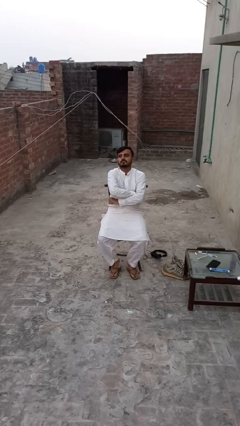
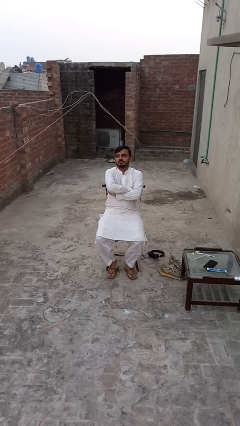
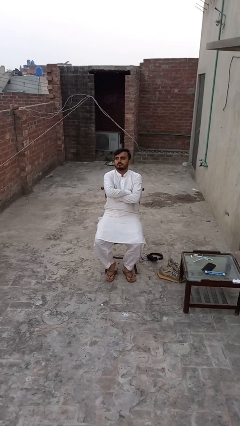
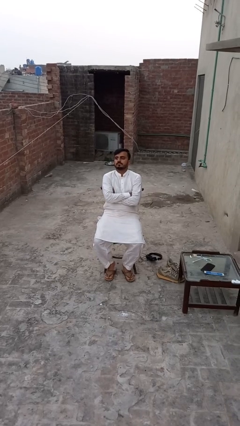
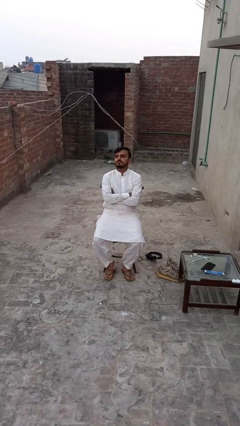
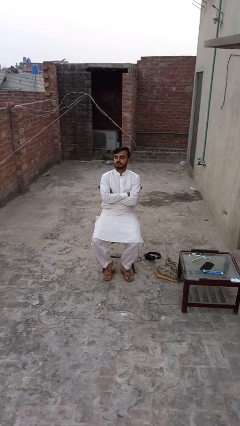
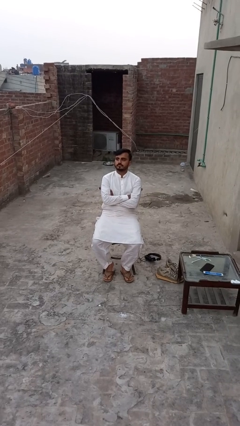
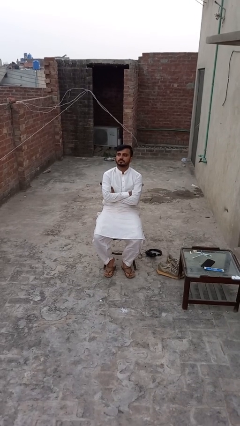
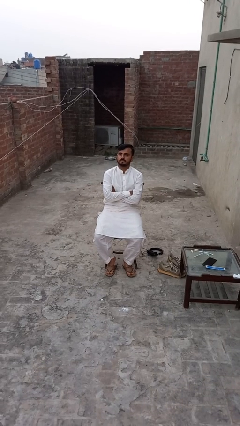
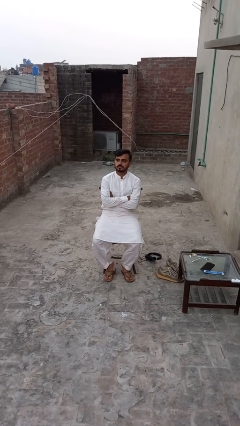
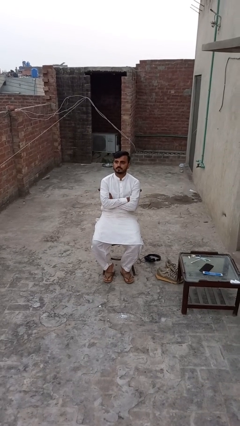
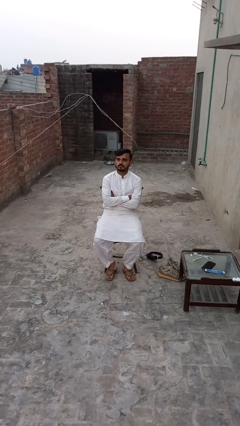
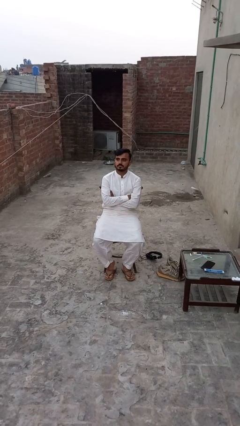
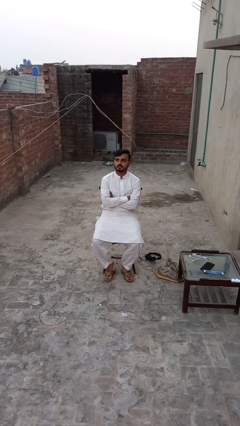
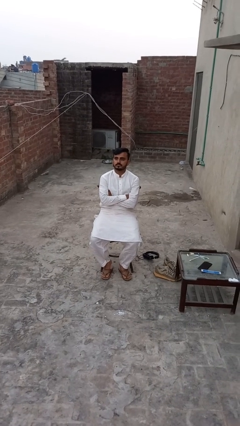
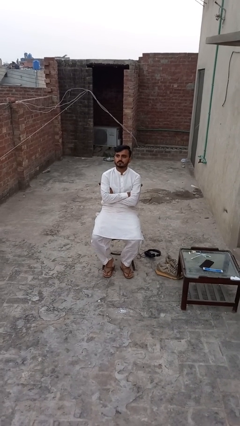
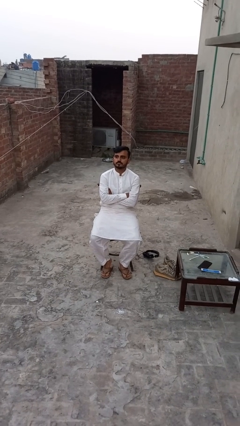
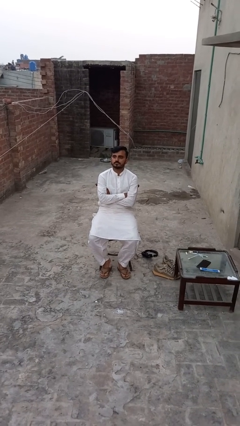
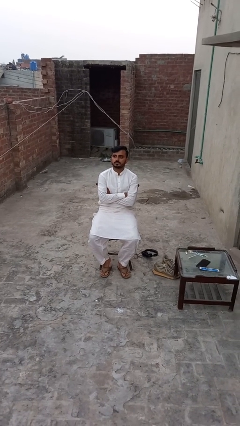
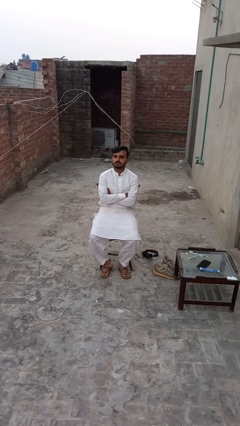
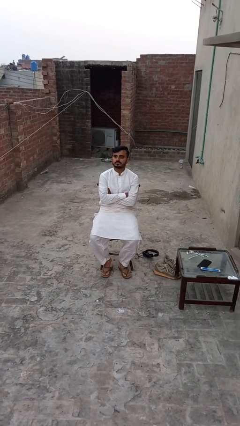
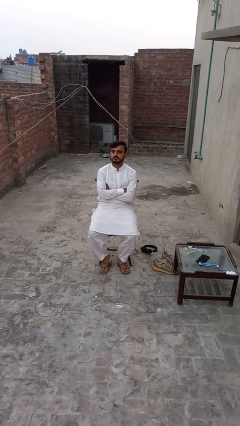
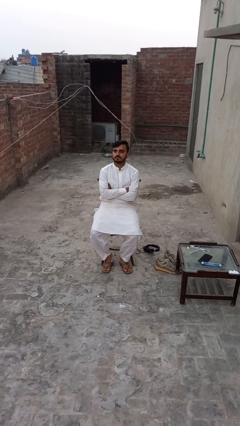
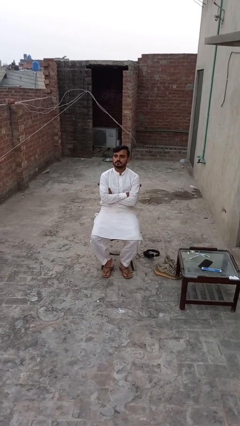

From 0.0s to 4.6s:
person crosses arms

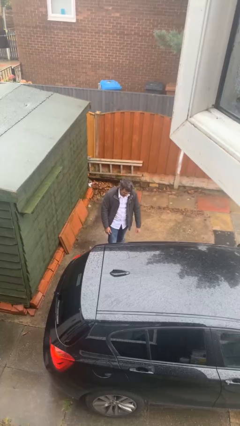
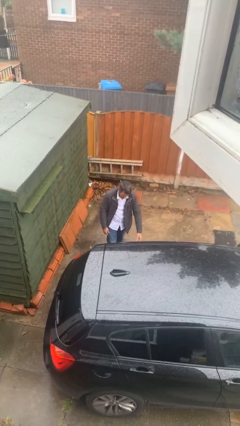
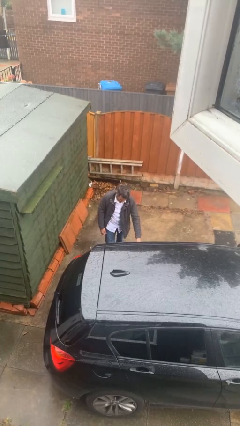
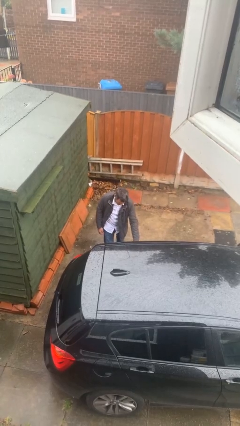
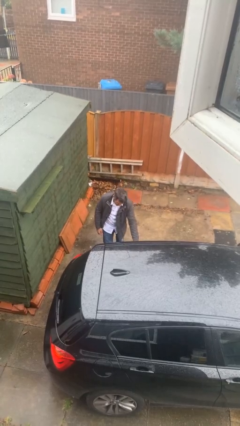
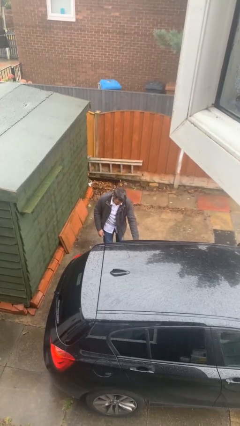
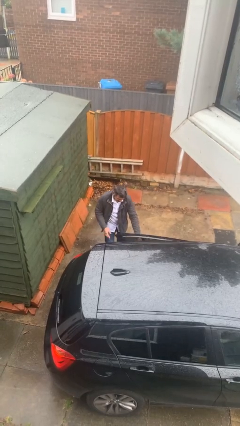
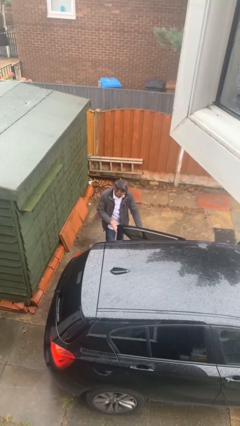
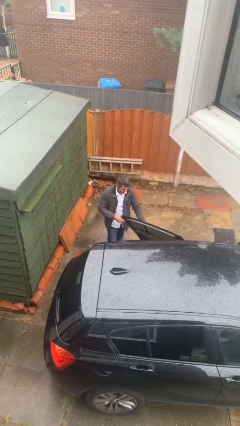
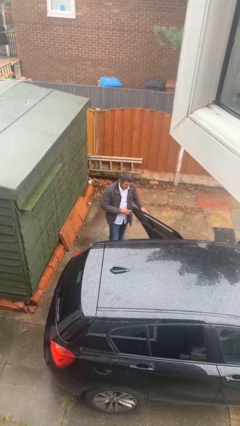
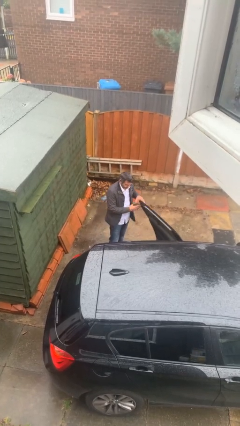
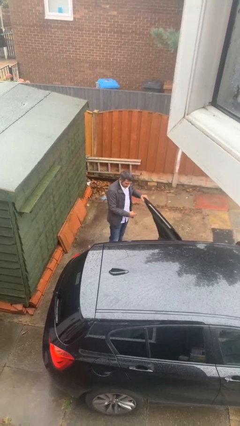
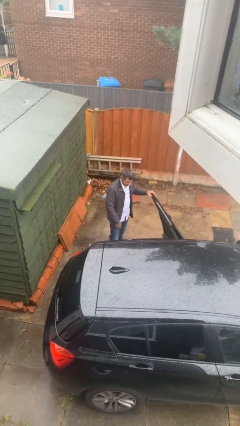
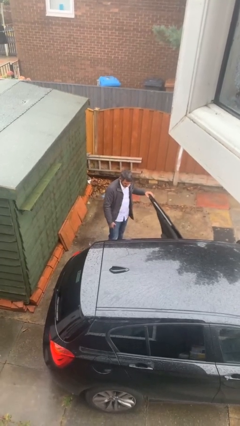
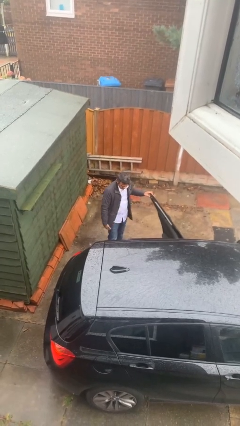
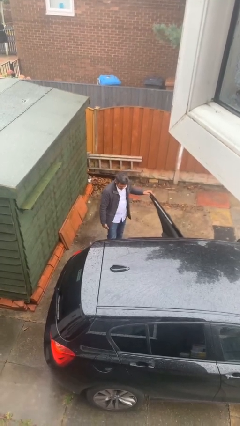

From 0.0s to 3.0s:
person opens car door

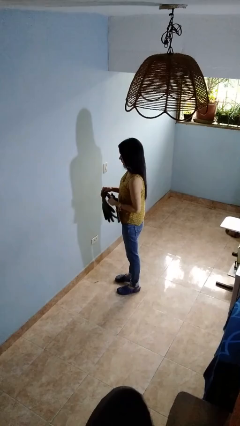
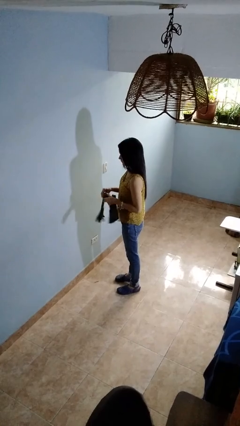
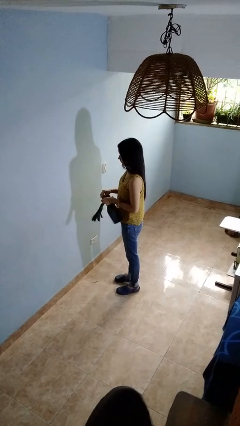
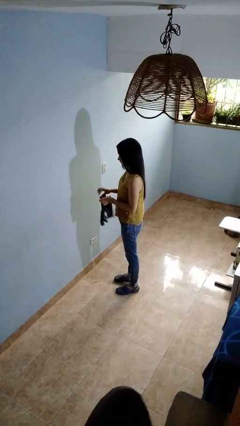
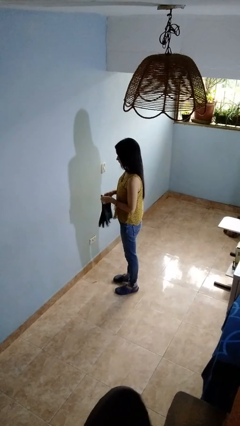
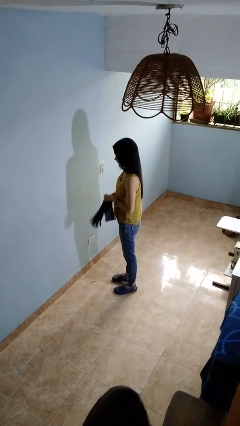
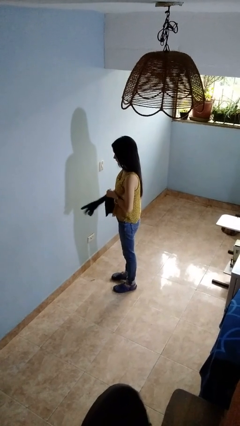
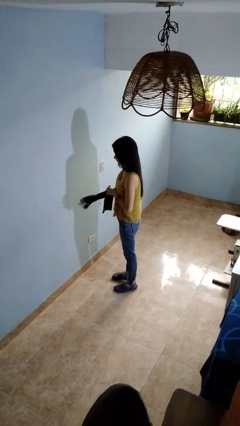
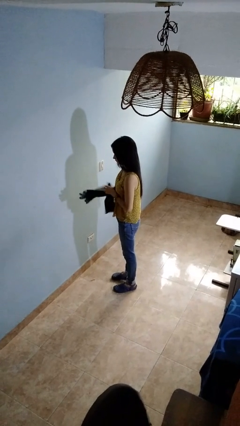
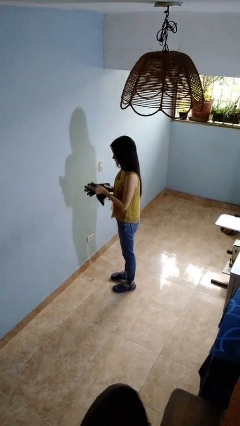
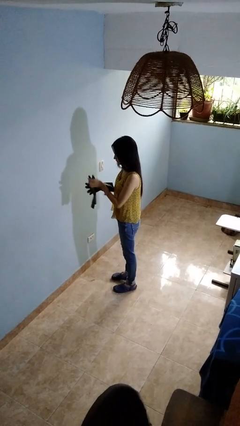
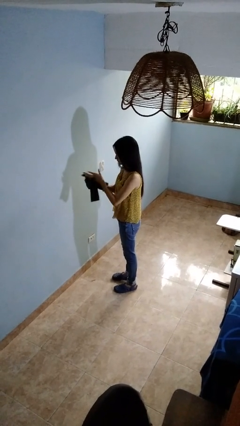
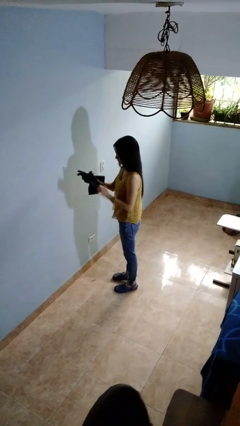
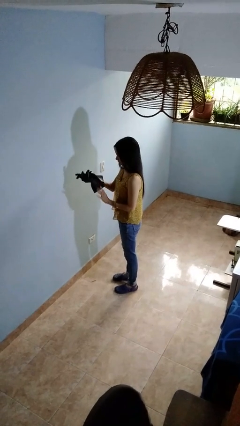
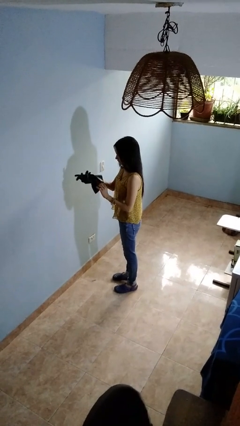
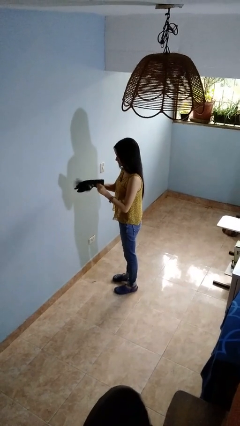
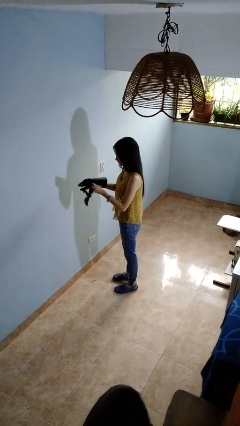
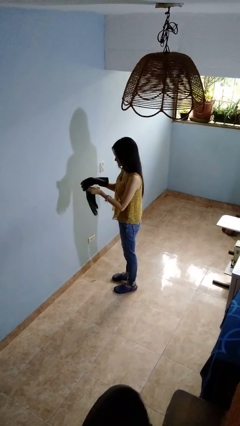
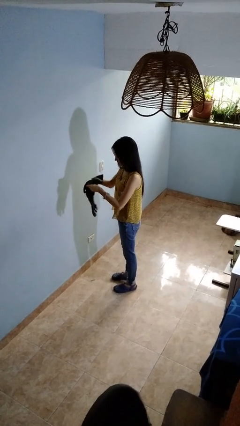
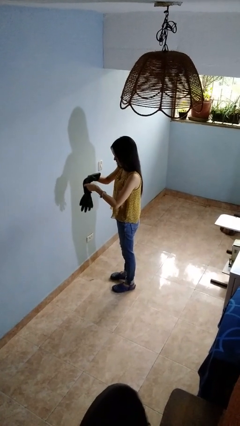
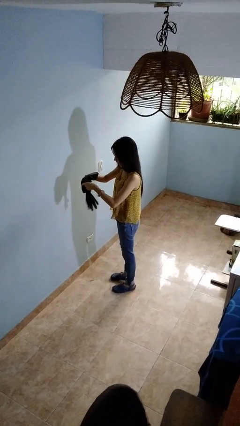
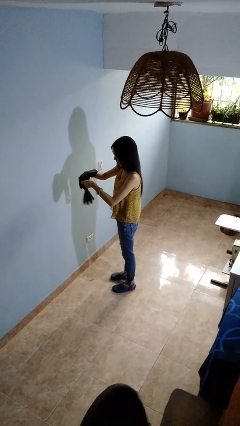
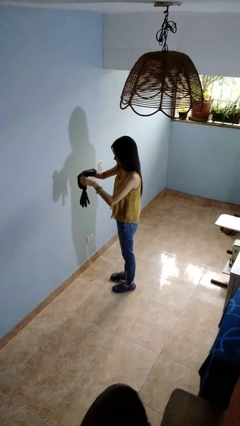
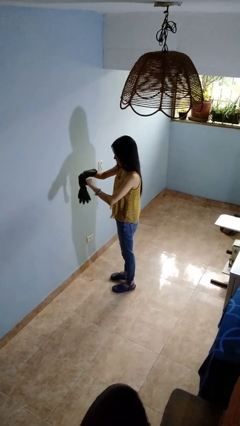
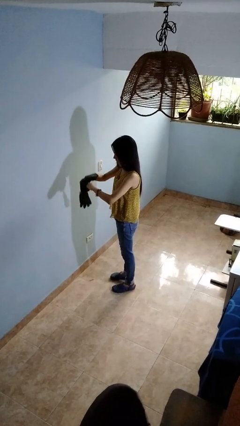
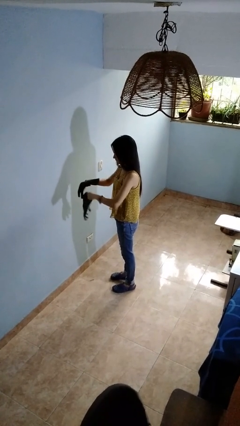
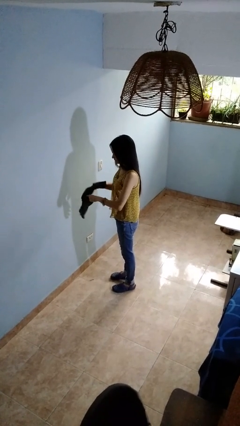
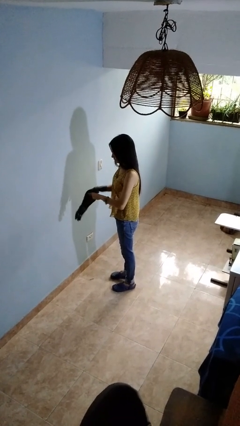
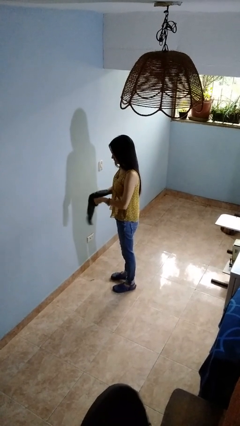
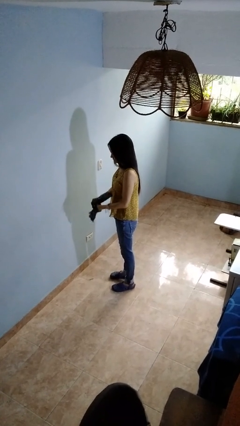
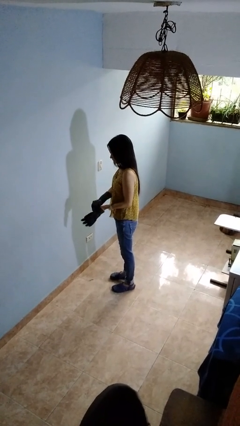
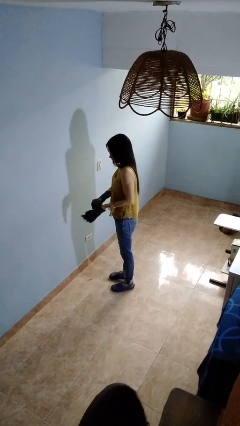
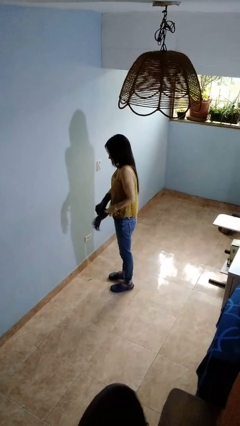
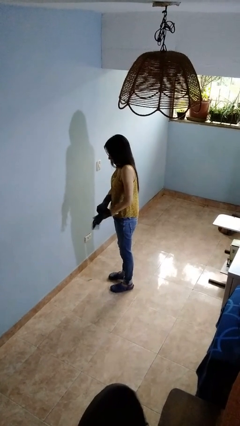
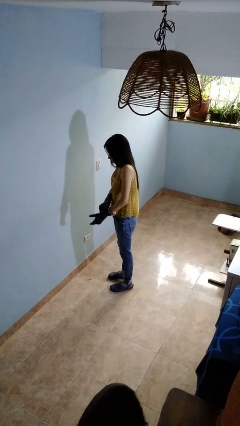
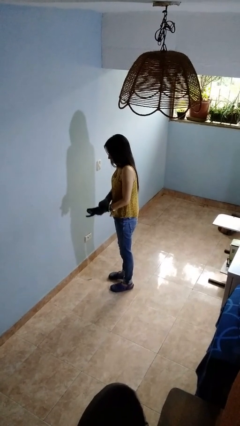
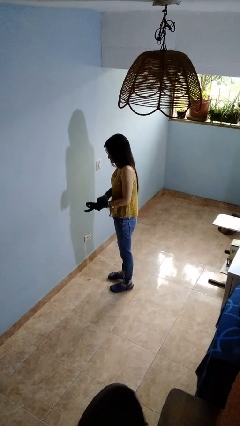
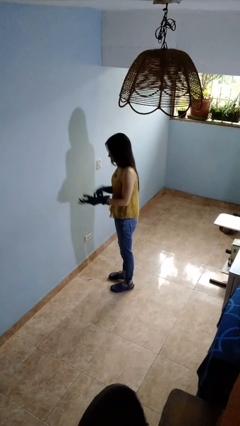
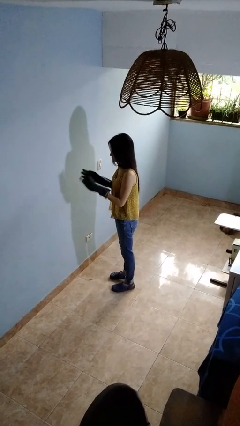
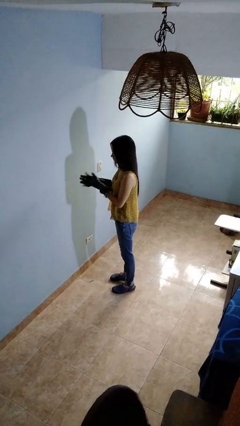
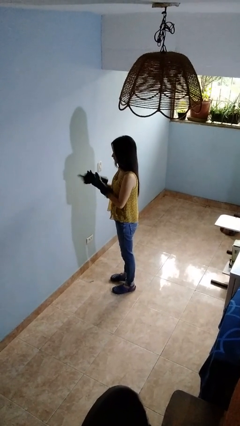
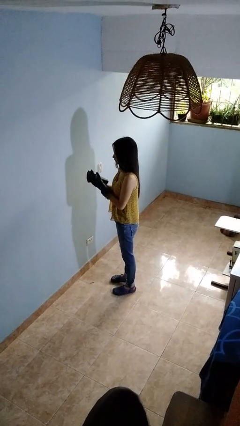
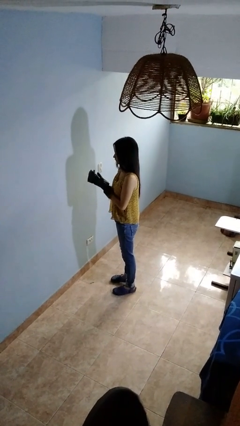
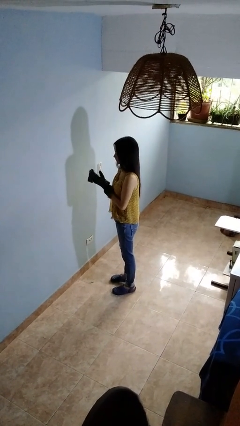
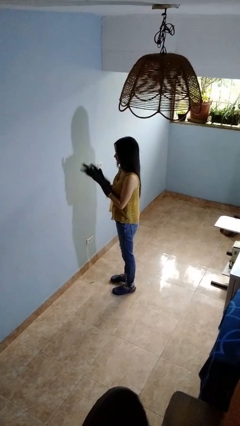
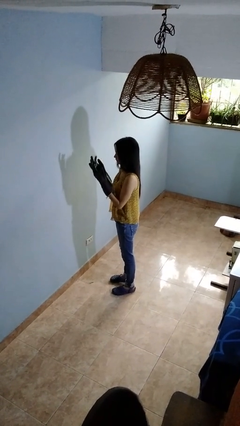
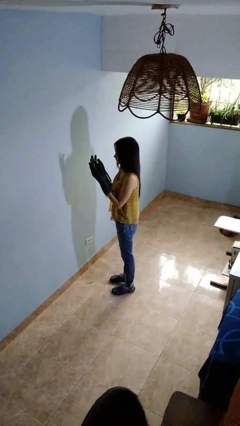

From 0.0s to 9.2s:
person puts on gloves

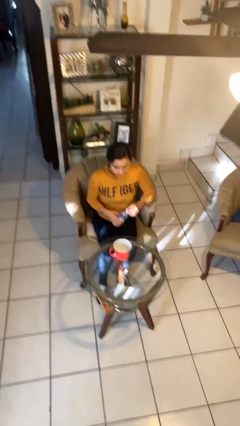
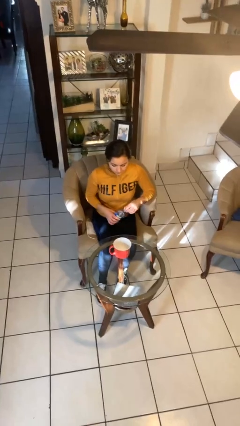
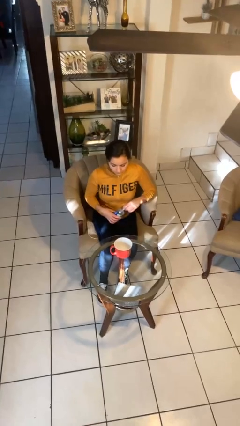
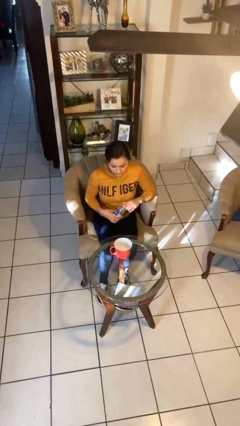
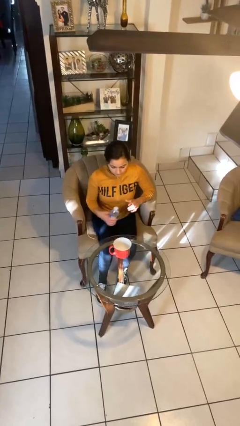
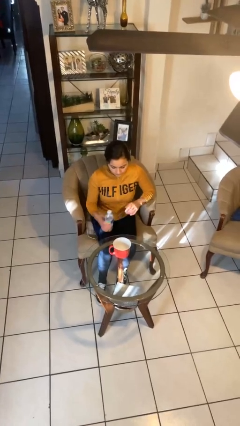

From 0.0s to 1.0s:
person screws lid to bottle

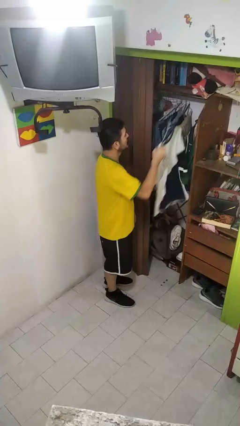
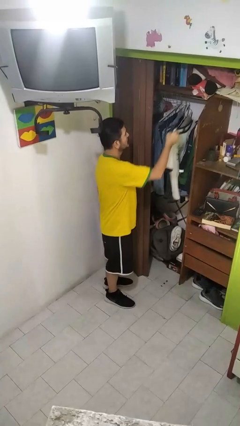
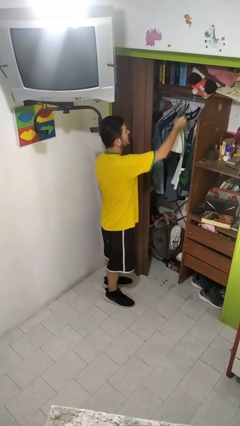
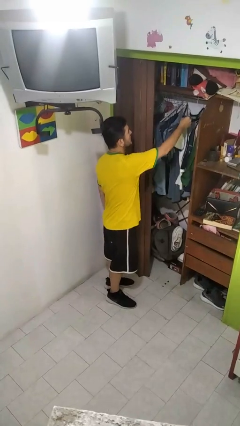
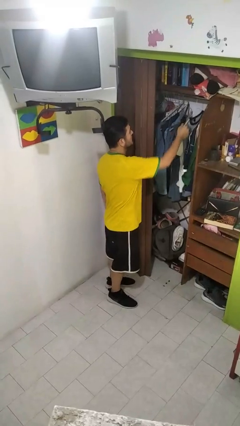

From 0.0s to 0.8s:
person puts clothes into closet
